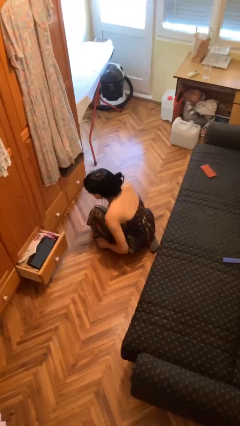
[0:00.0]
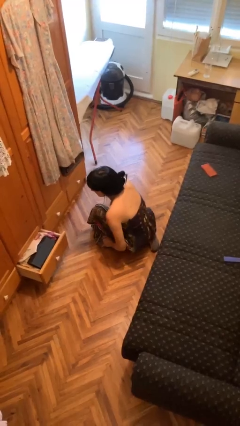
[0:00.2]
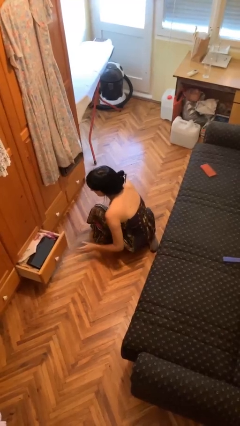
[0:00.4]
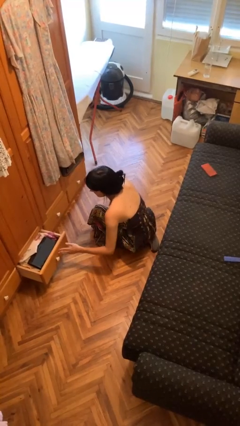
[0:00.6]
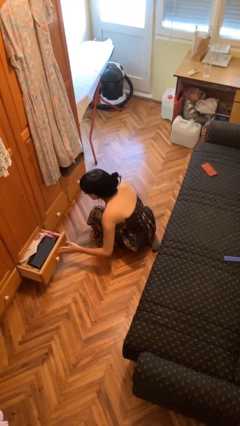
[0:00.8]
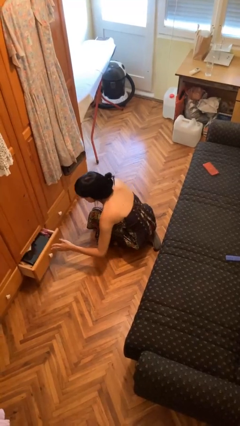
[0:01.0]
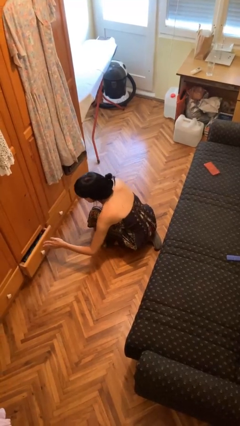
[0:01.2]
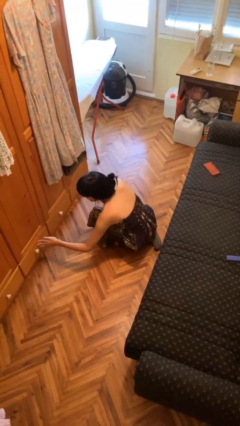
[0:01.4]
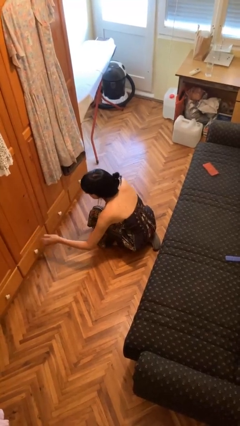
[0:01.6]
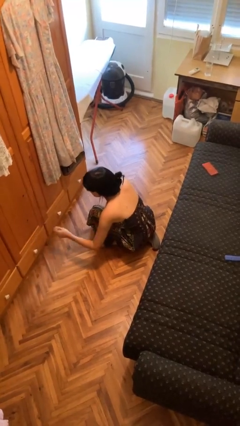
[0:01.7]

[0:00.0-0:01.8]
person closes dresser drawer

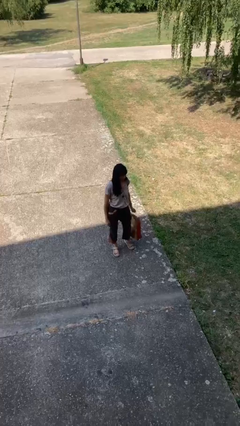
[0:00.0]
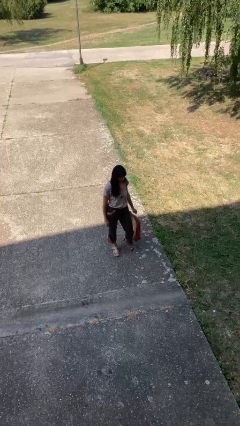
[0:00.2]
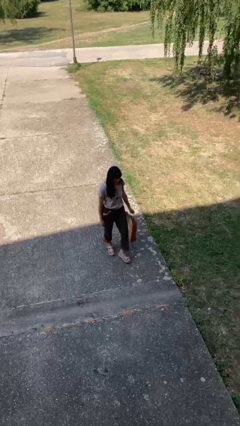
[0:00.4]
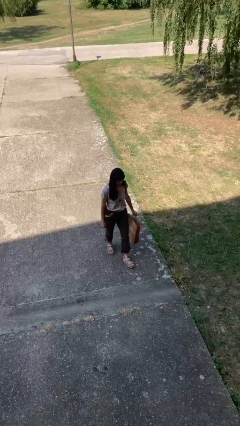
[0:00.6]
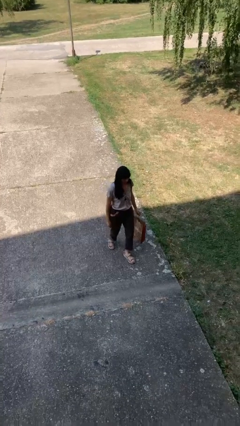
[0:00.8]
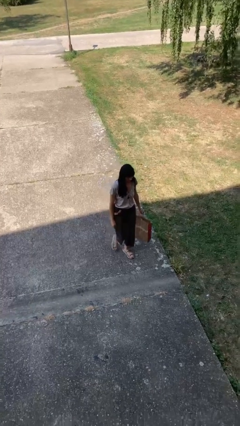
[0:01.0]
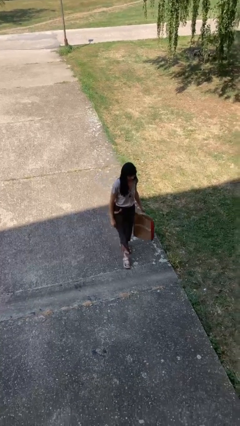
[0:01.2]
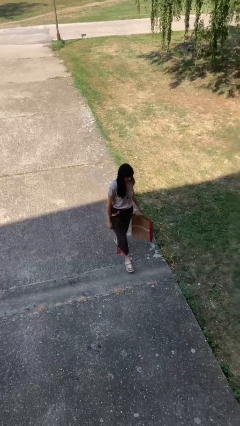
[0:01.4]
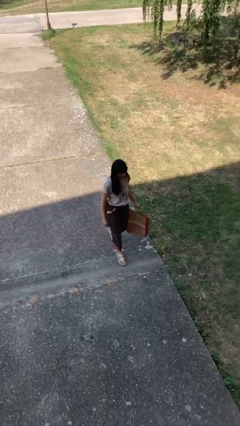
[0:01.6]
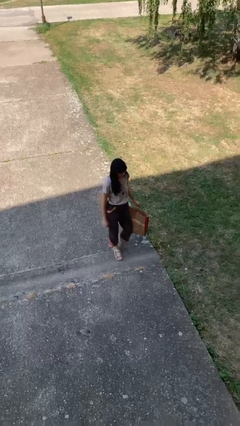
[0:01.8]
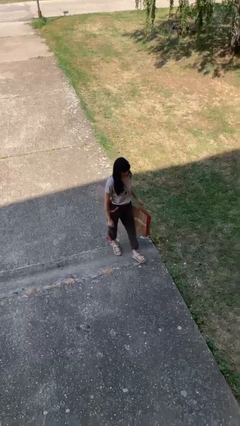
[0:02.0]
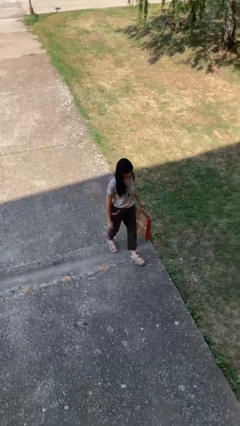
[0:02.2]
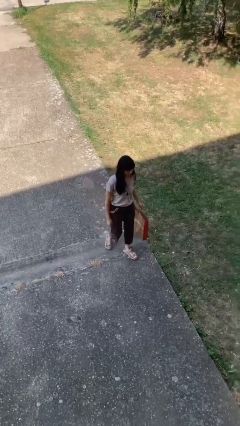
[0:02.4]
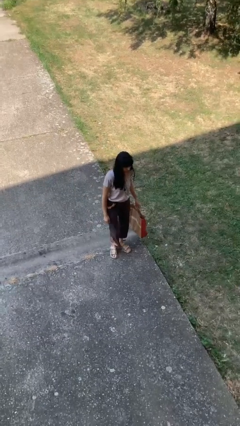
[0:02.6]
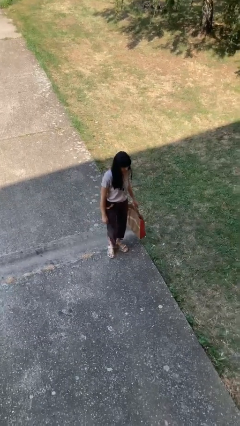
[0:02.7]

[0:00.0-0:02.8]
person carries groceries

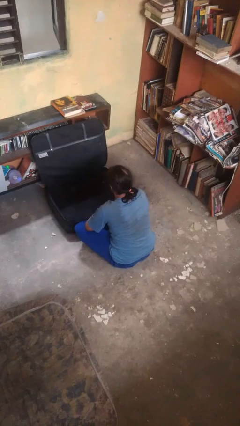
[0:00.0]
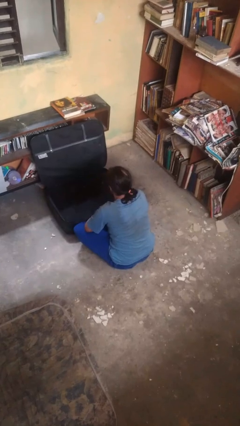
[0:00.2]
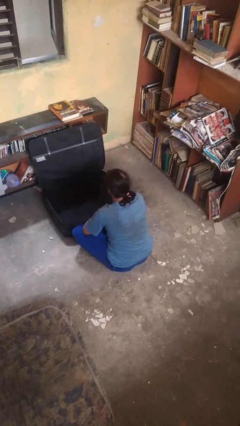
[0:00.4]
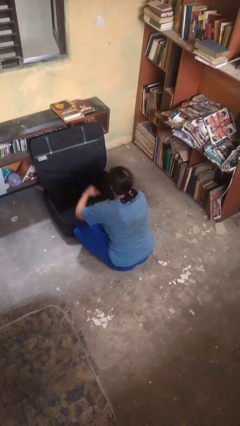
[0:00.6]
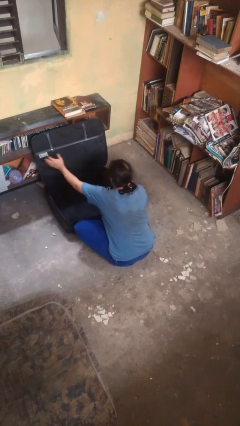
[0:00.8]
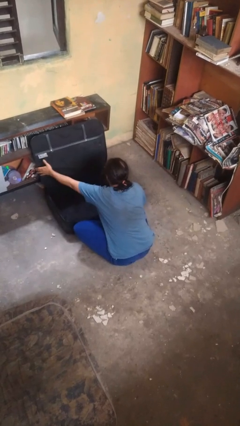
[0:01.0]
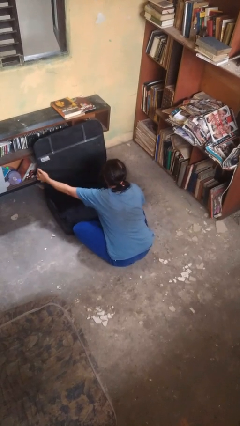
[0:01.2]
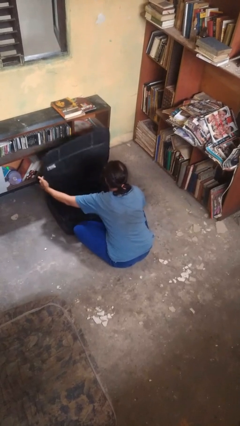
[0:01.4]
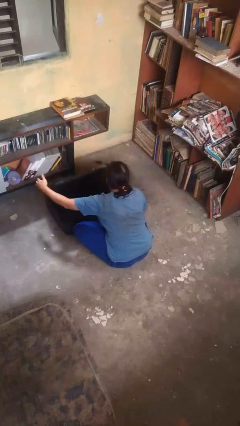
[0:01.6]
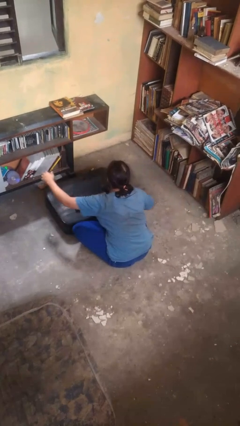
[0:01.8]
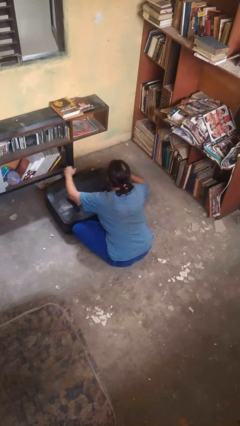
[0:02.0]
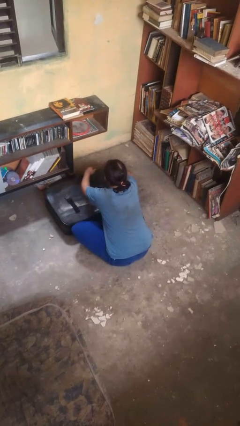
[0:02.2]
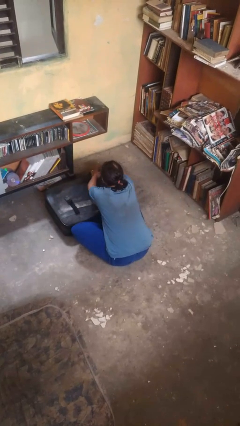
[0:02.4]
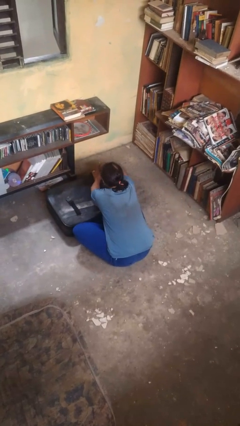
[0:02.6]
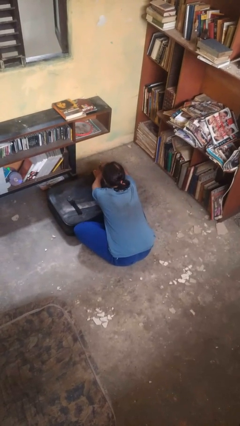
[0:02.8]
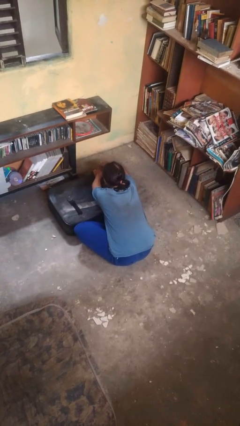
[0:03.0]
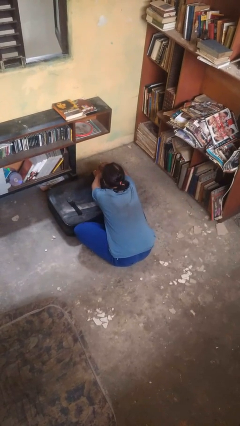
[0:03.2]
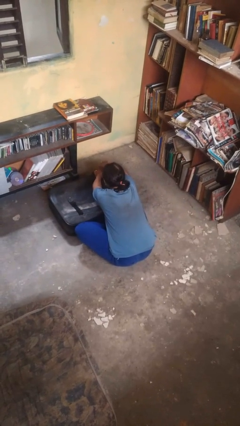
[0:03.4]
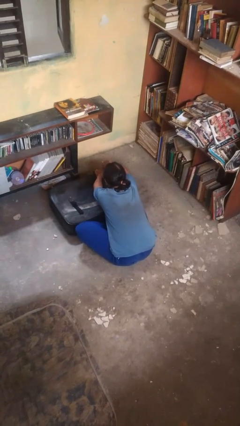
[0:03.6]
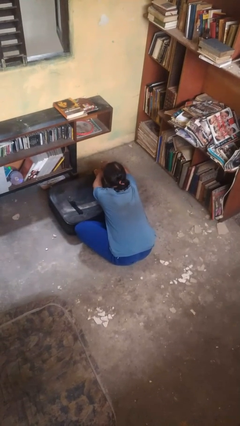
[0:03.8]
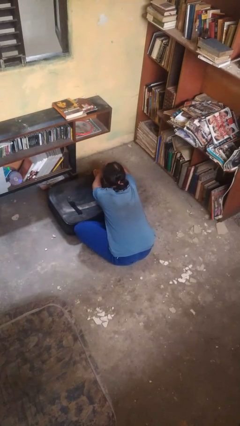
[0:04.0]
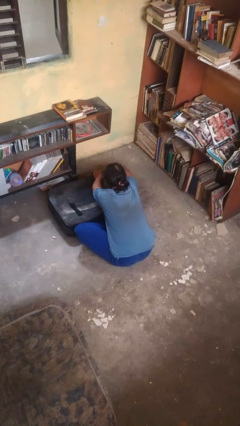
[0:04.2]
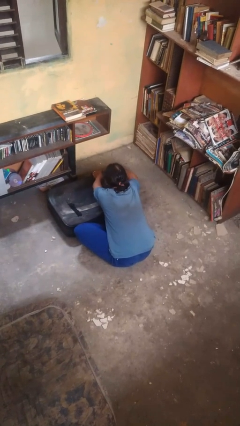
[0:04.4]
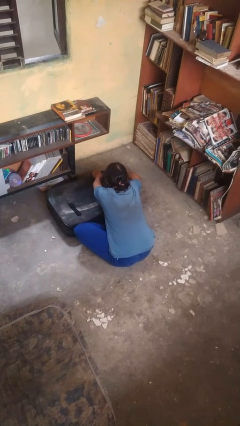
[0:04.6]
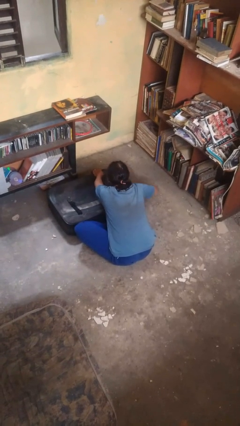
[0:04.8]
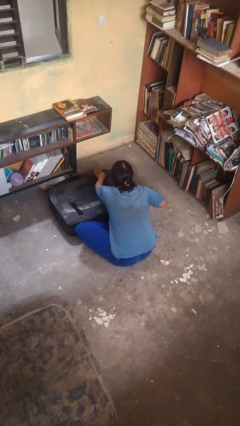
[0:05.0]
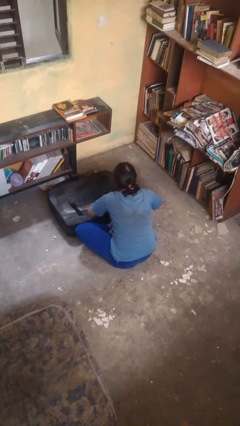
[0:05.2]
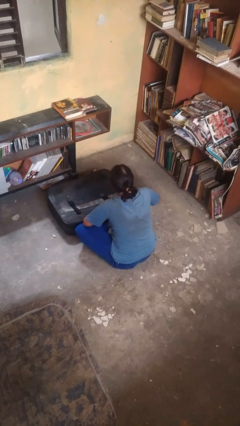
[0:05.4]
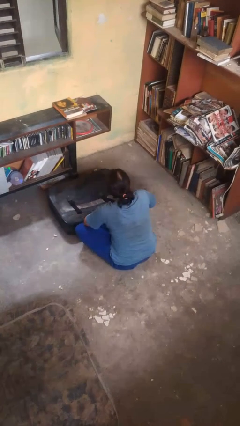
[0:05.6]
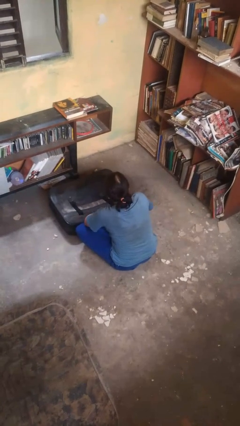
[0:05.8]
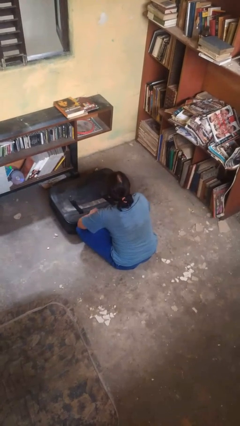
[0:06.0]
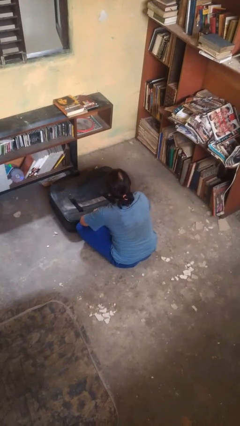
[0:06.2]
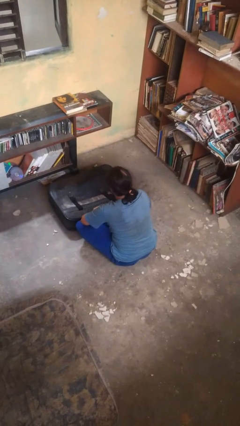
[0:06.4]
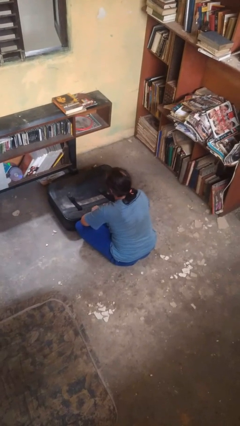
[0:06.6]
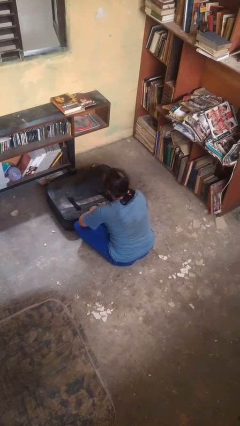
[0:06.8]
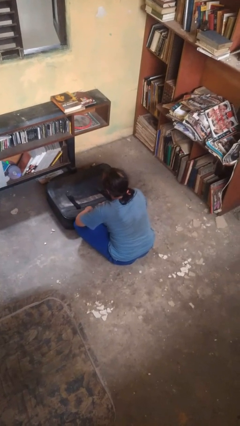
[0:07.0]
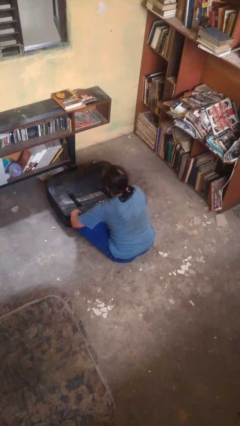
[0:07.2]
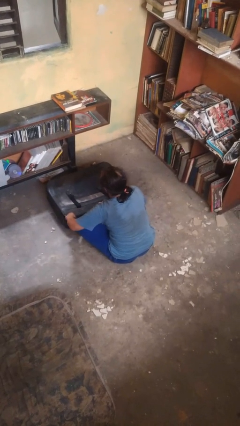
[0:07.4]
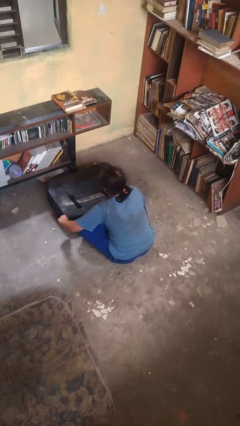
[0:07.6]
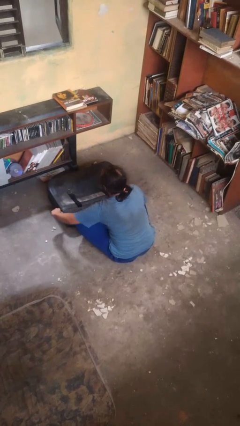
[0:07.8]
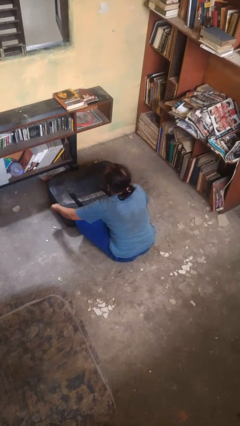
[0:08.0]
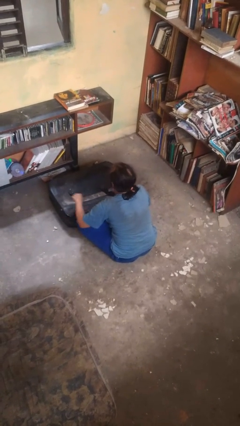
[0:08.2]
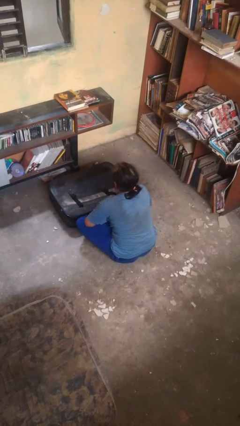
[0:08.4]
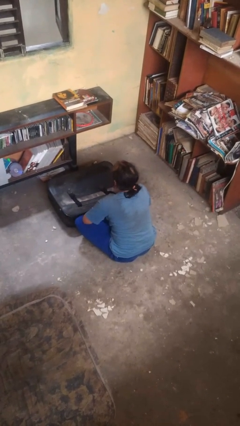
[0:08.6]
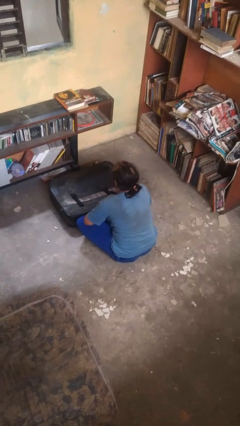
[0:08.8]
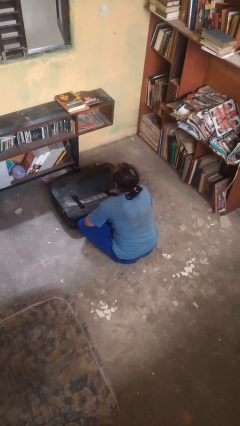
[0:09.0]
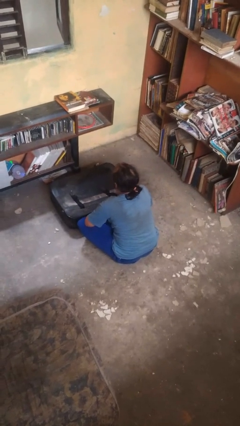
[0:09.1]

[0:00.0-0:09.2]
person closes suitcase

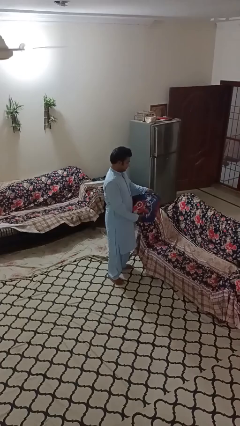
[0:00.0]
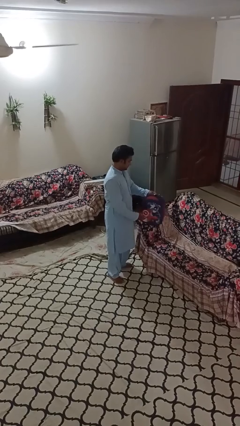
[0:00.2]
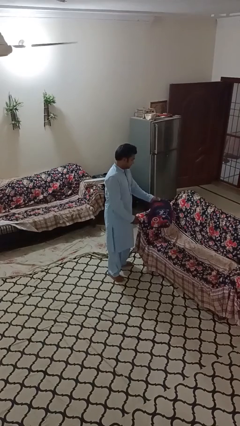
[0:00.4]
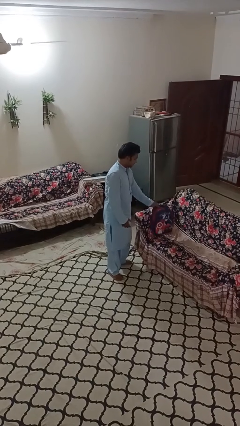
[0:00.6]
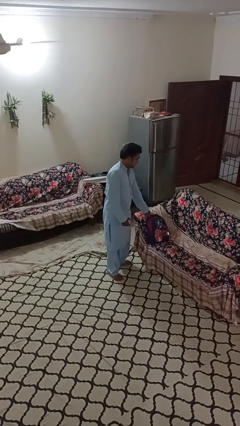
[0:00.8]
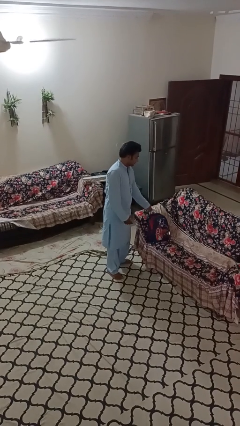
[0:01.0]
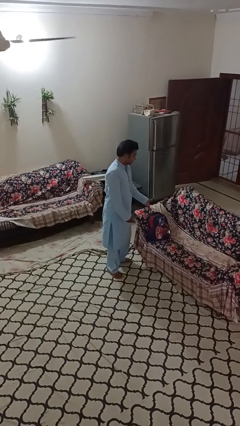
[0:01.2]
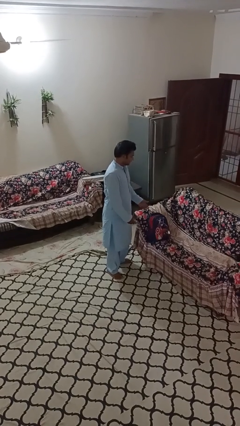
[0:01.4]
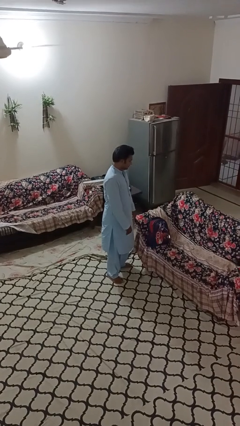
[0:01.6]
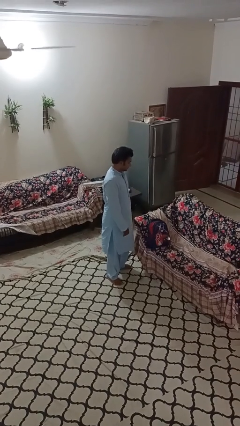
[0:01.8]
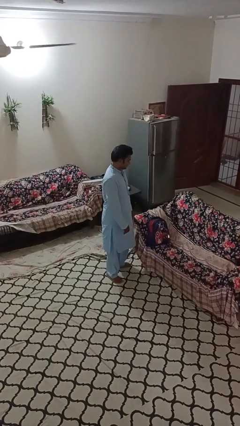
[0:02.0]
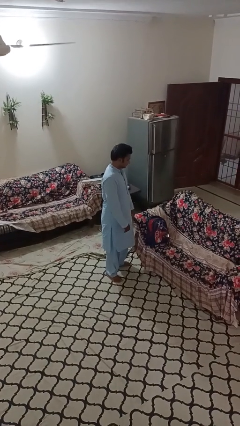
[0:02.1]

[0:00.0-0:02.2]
person puts down object on couch

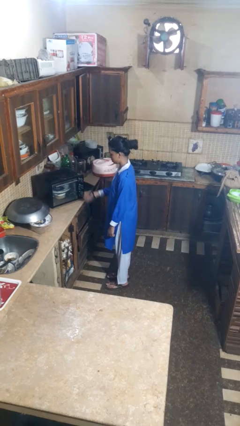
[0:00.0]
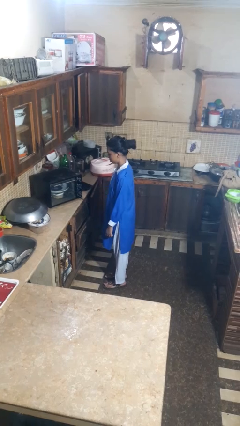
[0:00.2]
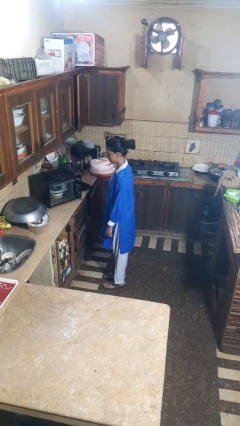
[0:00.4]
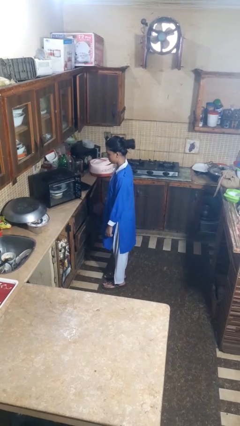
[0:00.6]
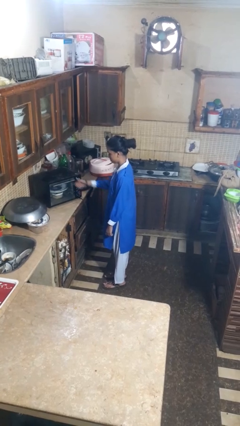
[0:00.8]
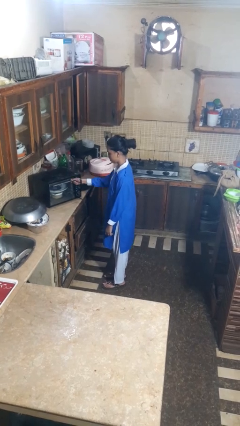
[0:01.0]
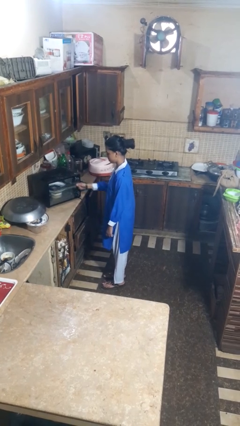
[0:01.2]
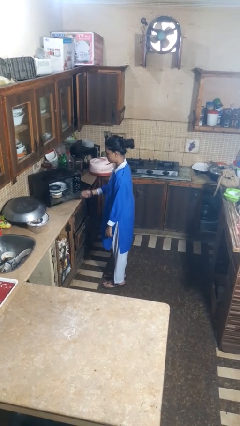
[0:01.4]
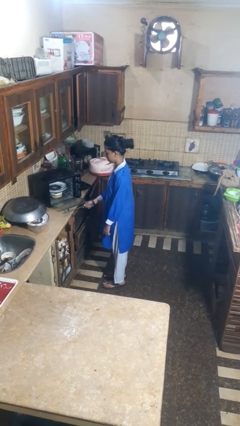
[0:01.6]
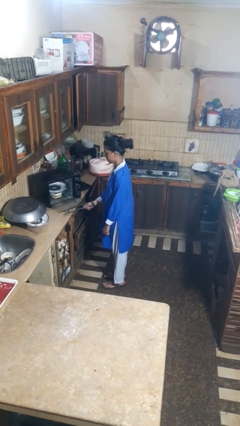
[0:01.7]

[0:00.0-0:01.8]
person opens dishwasher
